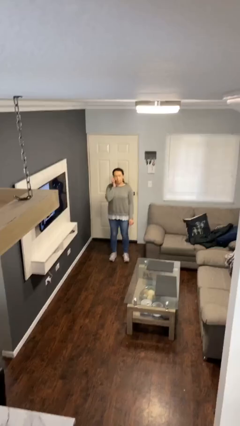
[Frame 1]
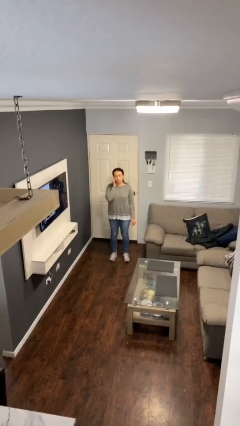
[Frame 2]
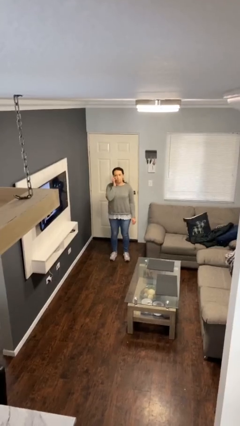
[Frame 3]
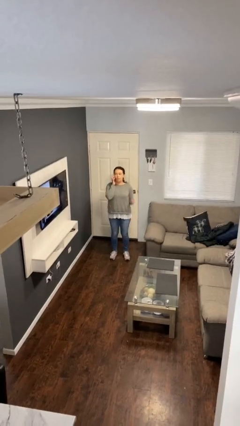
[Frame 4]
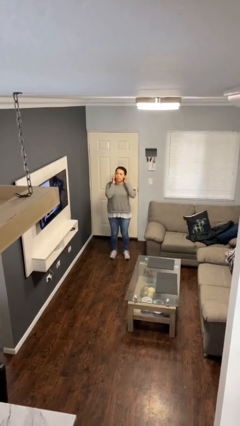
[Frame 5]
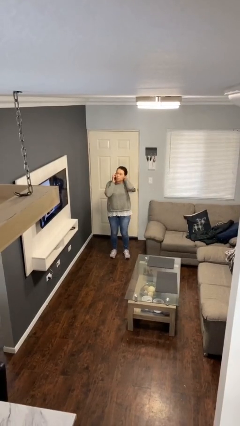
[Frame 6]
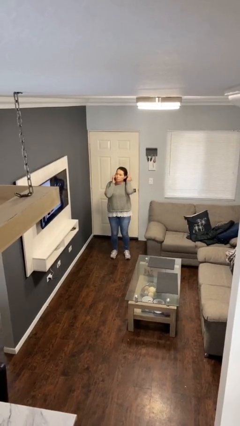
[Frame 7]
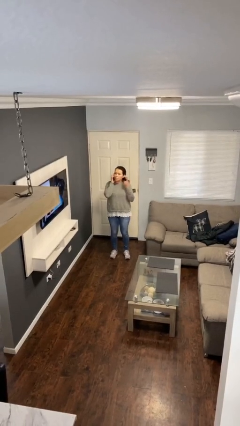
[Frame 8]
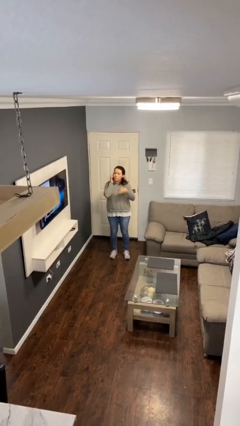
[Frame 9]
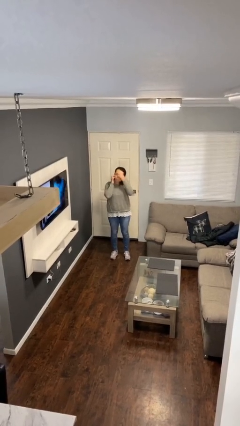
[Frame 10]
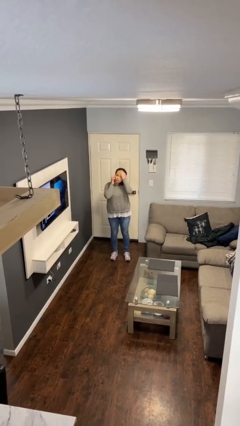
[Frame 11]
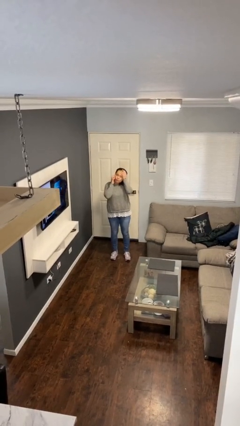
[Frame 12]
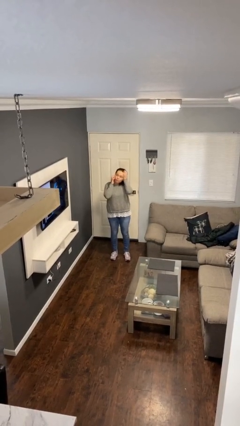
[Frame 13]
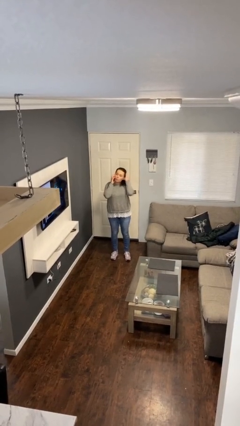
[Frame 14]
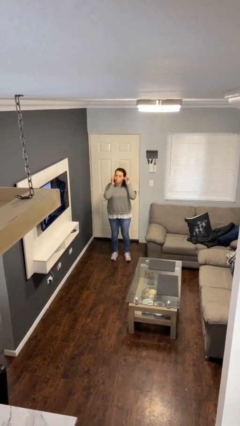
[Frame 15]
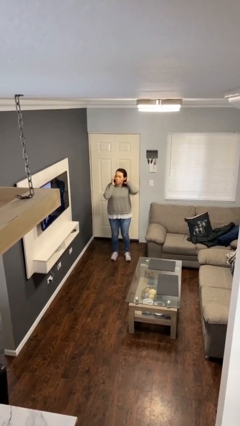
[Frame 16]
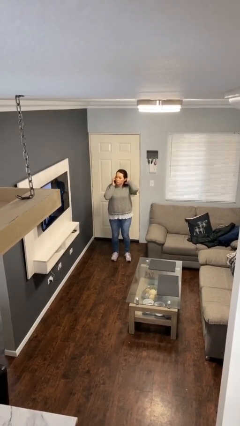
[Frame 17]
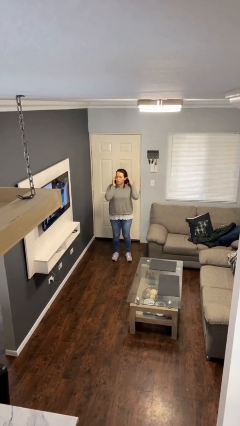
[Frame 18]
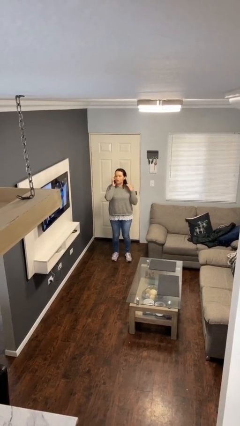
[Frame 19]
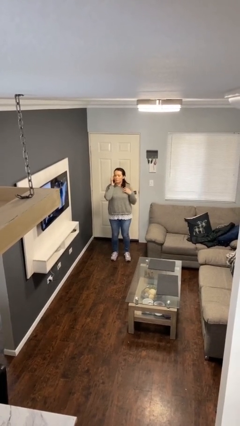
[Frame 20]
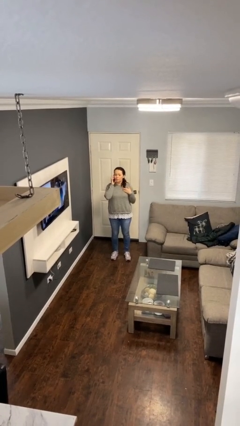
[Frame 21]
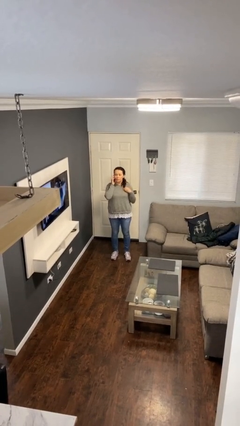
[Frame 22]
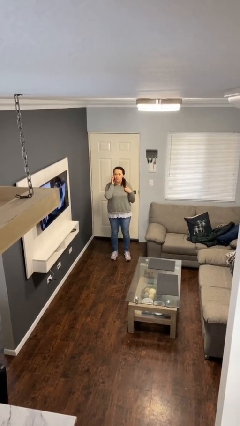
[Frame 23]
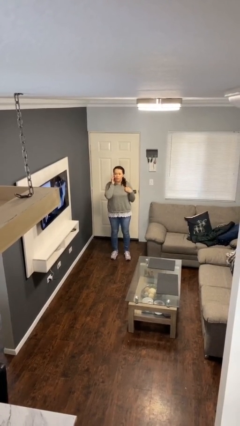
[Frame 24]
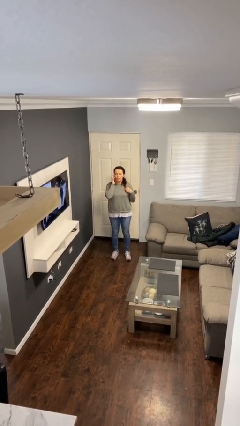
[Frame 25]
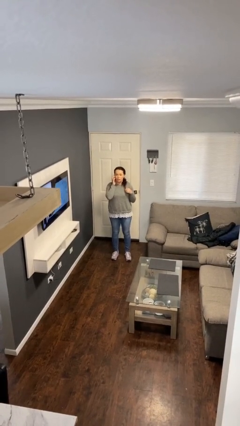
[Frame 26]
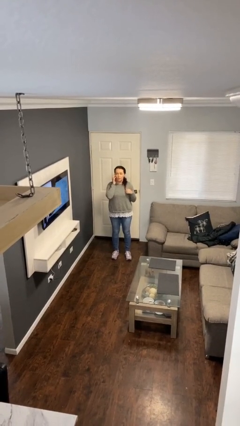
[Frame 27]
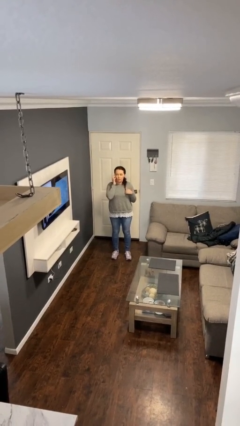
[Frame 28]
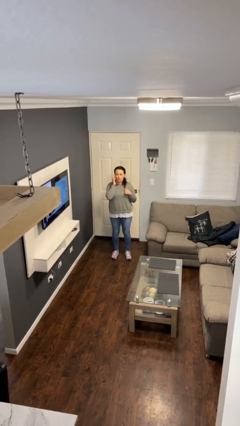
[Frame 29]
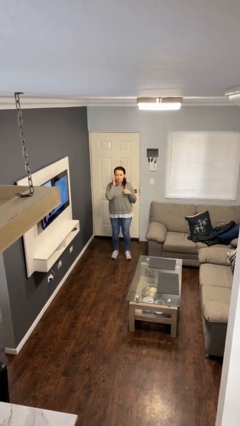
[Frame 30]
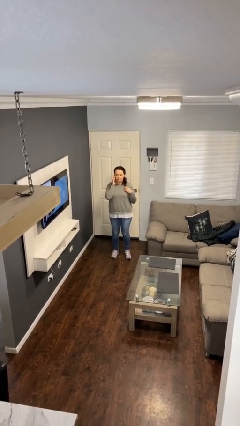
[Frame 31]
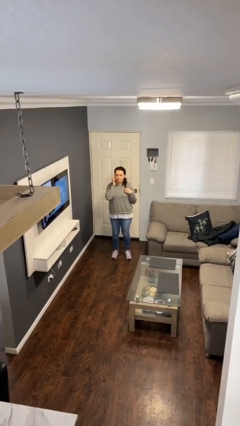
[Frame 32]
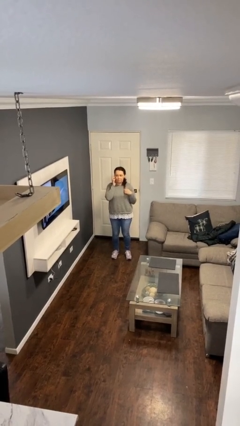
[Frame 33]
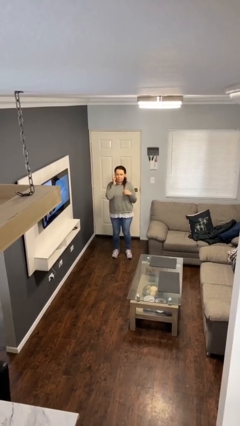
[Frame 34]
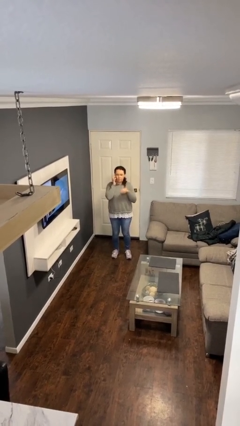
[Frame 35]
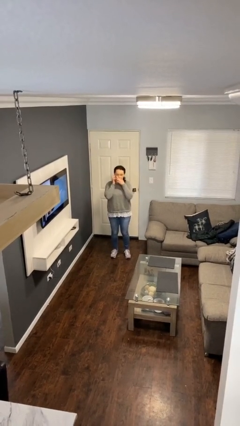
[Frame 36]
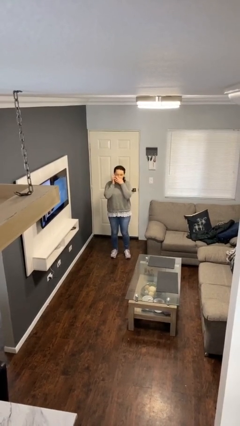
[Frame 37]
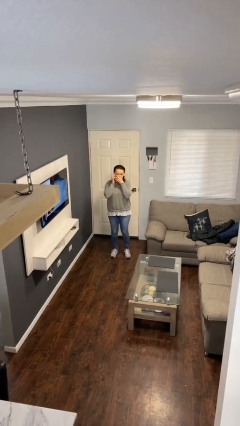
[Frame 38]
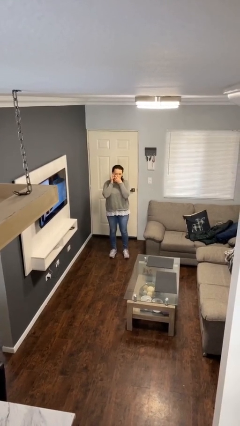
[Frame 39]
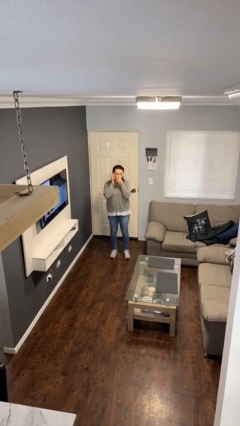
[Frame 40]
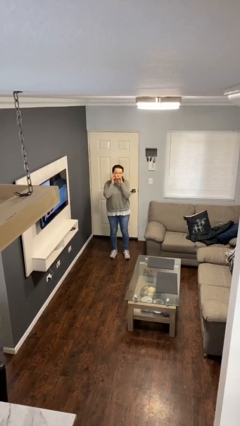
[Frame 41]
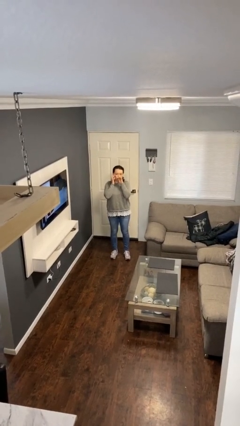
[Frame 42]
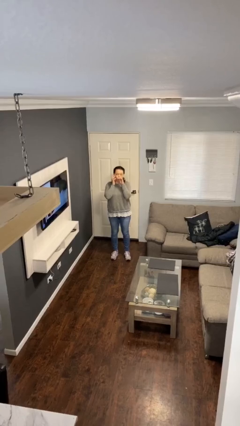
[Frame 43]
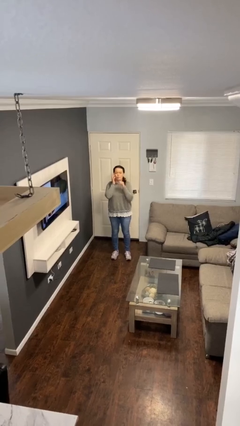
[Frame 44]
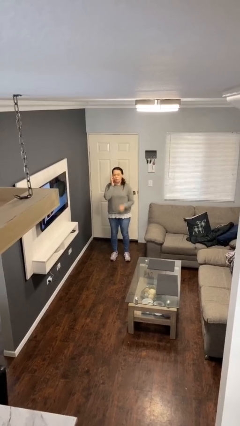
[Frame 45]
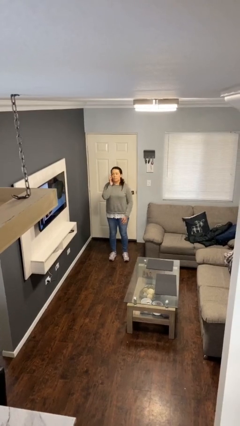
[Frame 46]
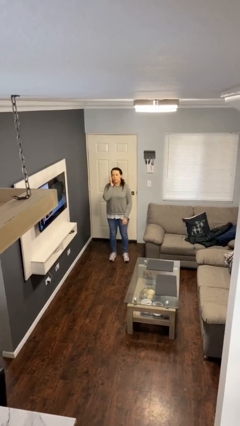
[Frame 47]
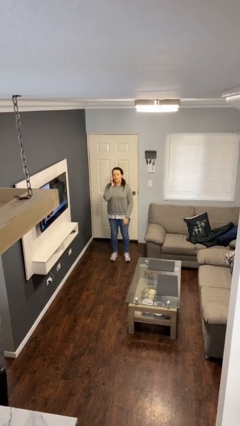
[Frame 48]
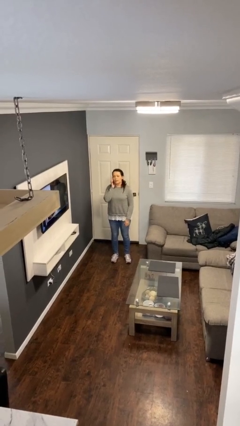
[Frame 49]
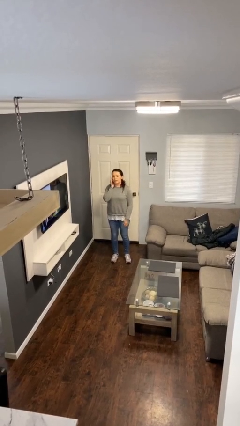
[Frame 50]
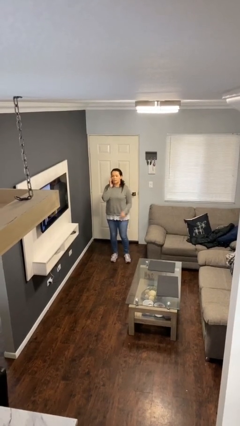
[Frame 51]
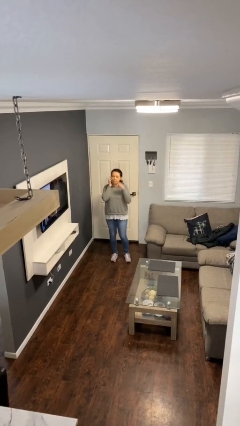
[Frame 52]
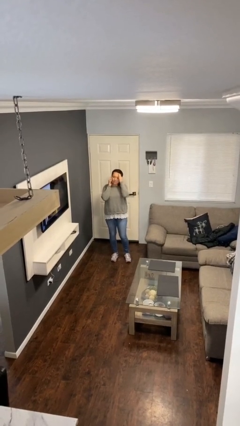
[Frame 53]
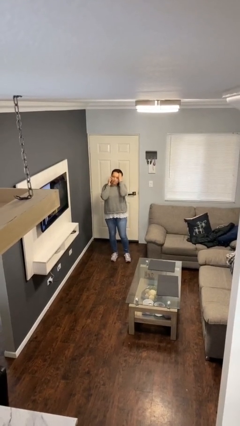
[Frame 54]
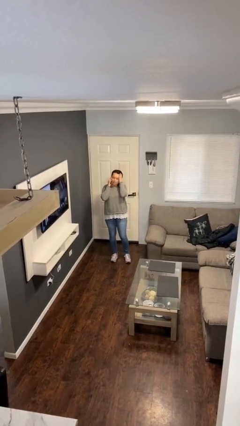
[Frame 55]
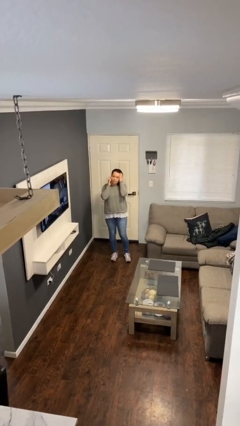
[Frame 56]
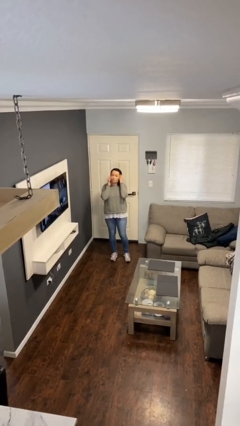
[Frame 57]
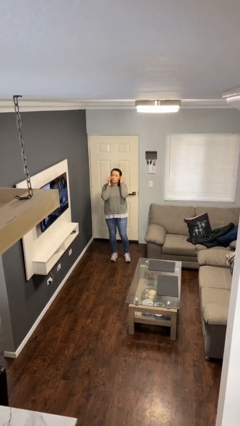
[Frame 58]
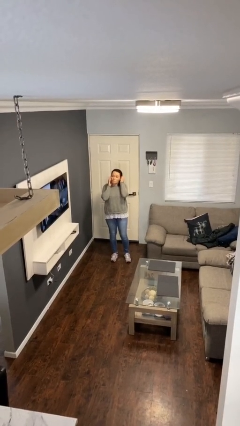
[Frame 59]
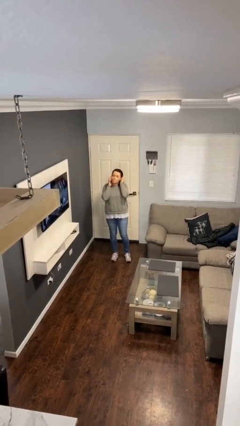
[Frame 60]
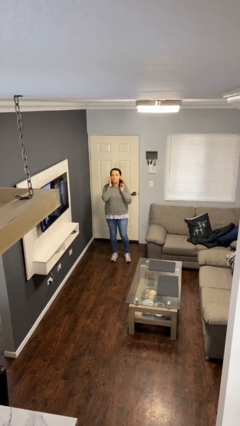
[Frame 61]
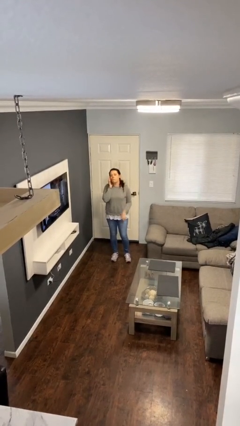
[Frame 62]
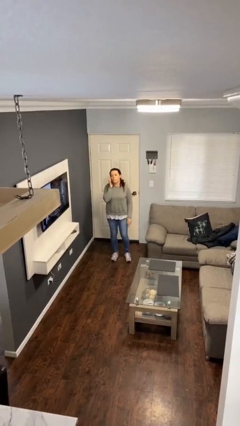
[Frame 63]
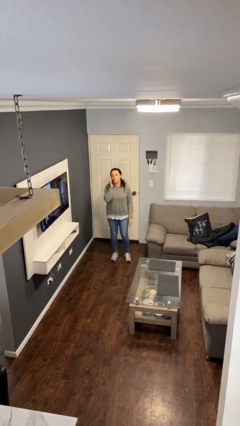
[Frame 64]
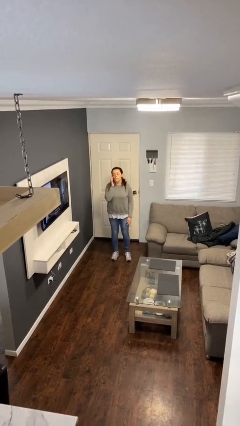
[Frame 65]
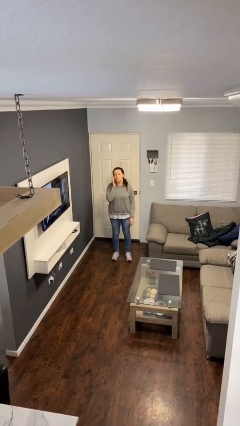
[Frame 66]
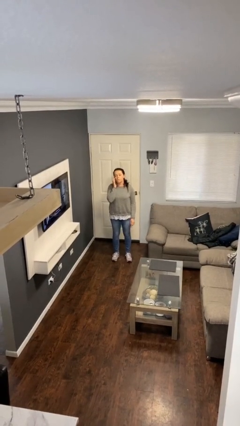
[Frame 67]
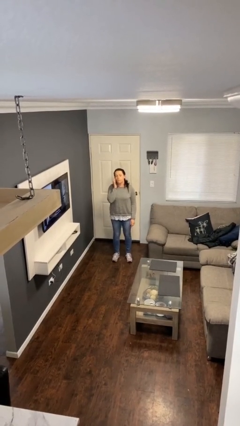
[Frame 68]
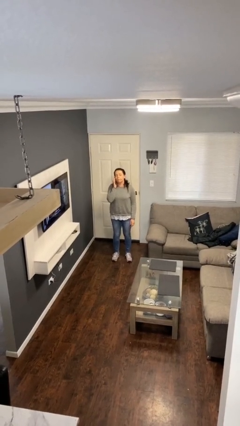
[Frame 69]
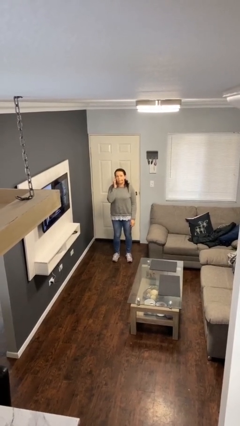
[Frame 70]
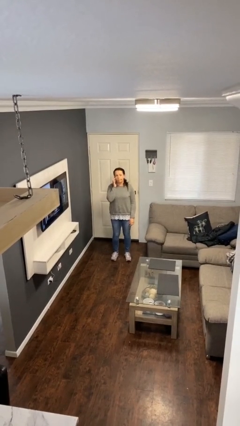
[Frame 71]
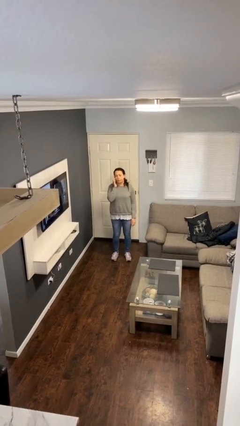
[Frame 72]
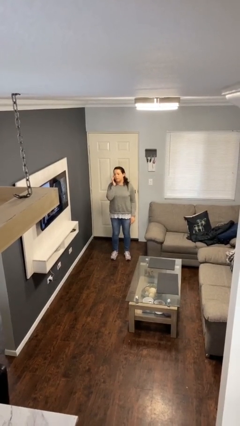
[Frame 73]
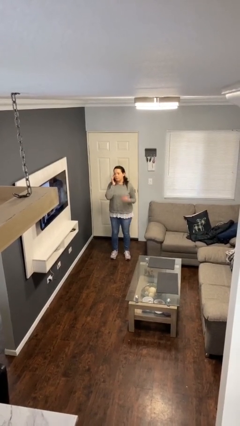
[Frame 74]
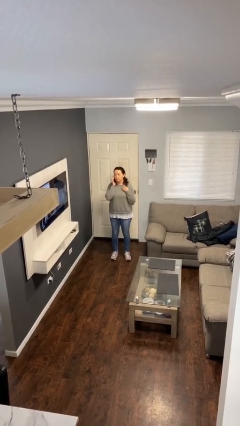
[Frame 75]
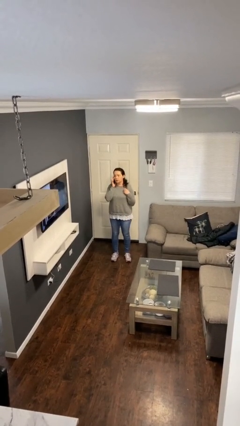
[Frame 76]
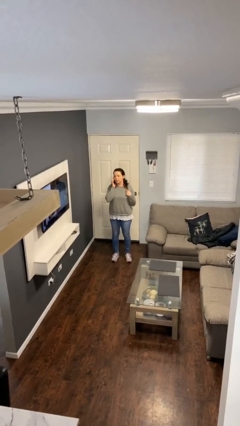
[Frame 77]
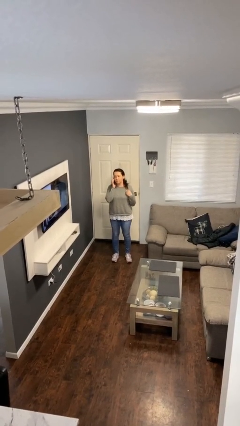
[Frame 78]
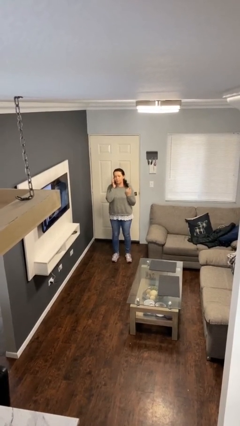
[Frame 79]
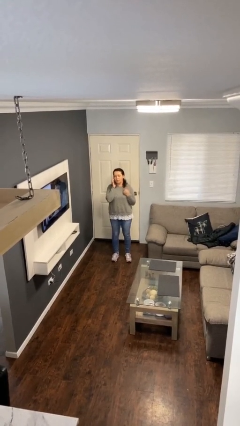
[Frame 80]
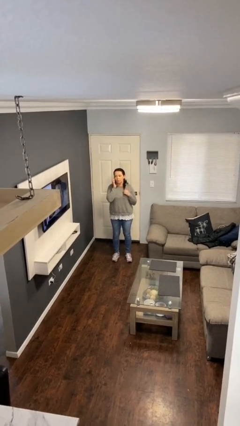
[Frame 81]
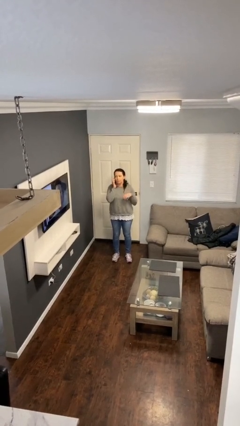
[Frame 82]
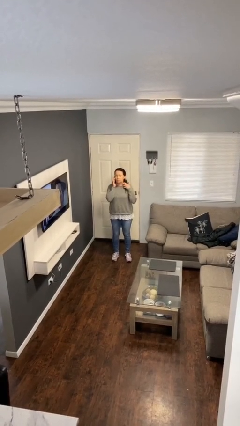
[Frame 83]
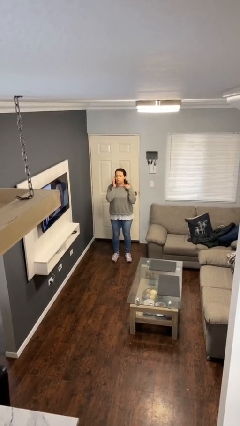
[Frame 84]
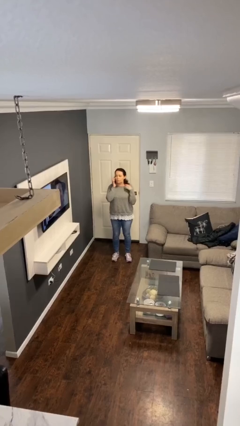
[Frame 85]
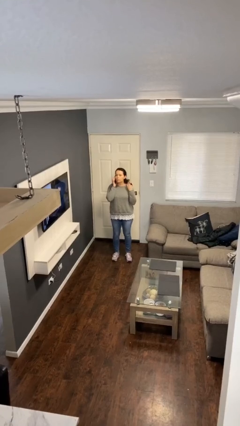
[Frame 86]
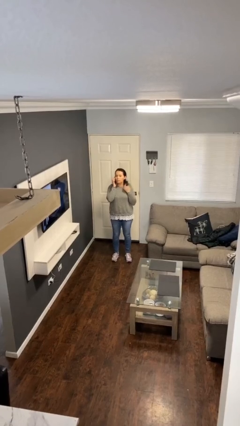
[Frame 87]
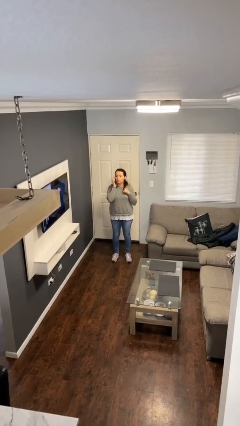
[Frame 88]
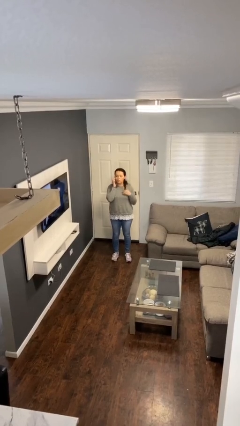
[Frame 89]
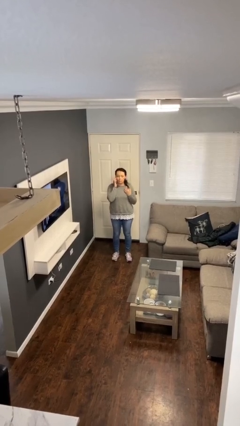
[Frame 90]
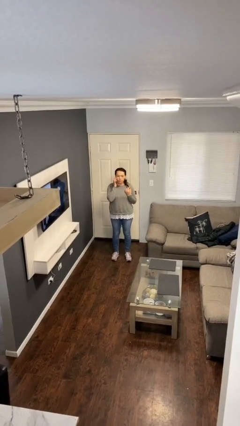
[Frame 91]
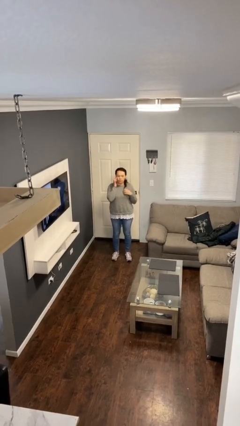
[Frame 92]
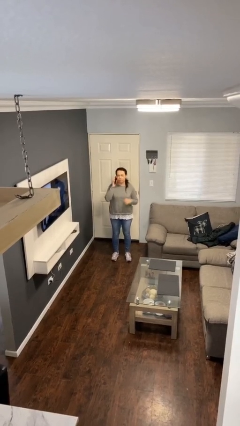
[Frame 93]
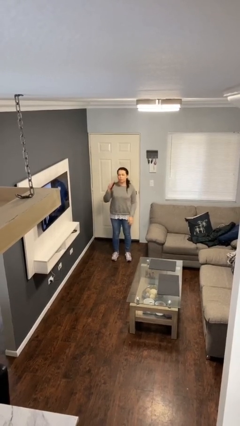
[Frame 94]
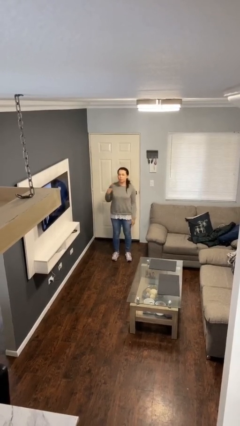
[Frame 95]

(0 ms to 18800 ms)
person talks on phone
